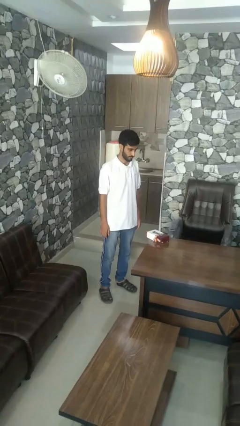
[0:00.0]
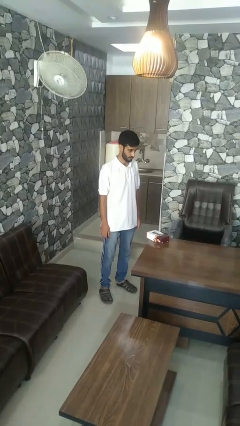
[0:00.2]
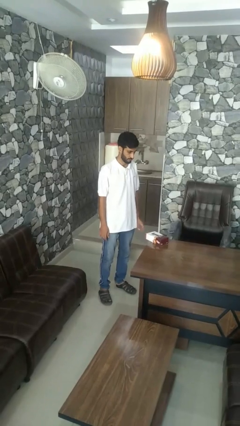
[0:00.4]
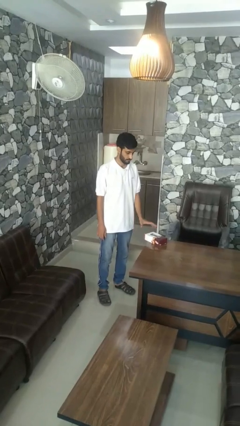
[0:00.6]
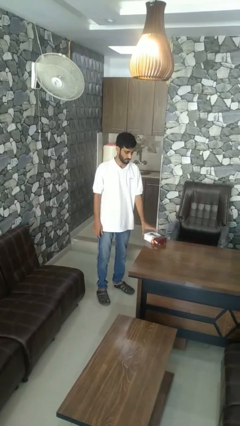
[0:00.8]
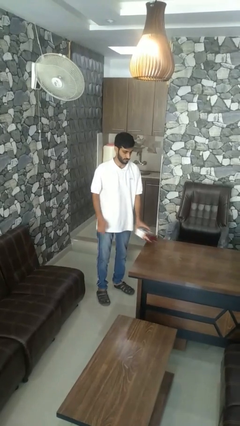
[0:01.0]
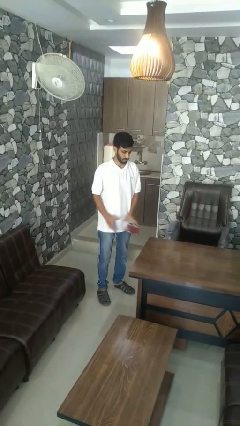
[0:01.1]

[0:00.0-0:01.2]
person picks up object from table

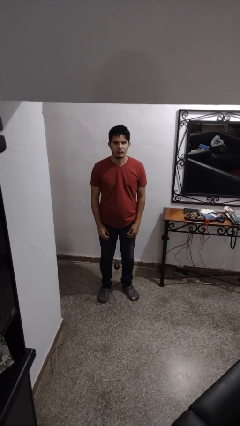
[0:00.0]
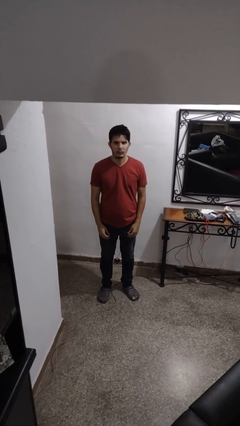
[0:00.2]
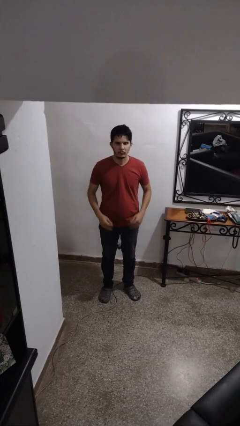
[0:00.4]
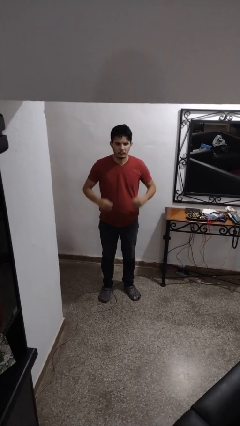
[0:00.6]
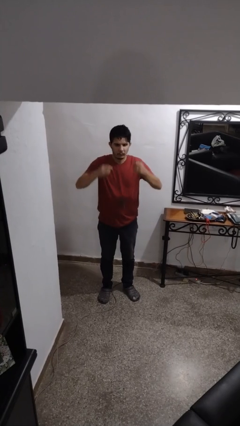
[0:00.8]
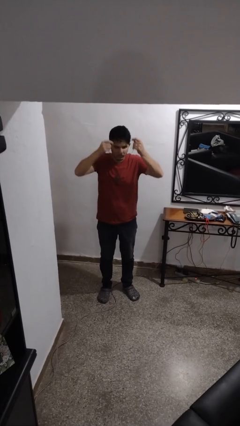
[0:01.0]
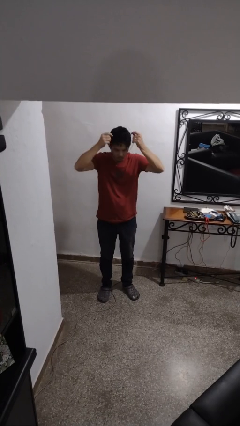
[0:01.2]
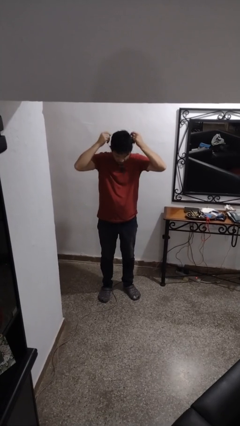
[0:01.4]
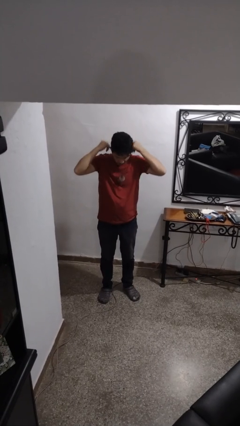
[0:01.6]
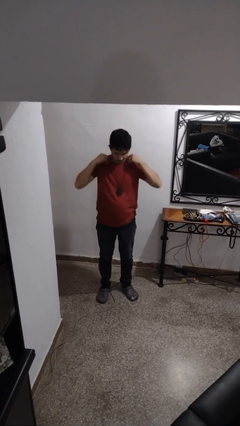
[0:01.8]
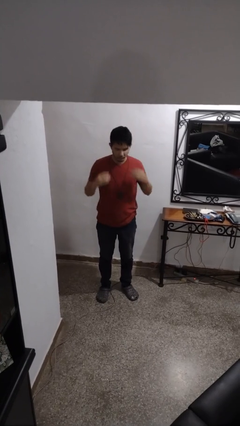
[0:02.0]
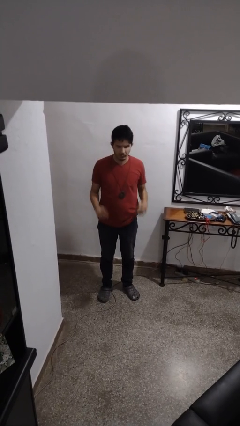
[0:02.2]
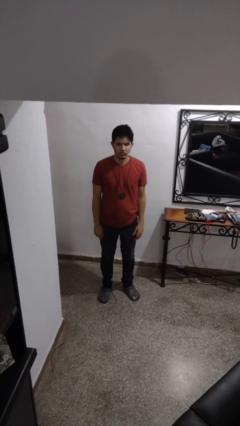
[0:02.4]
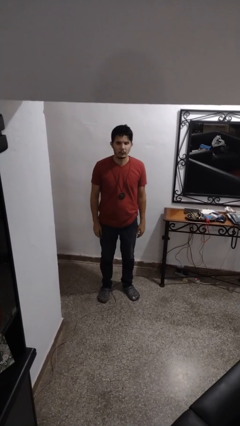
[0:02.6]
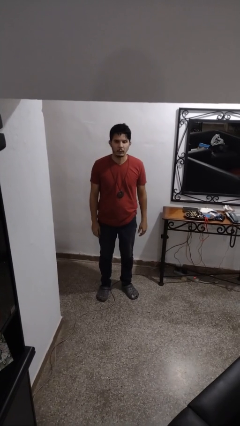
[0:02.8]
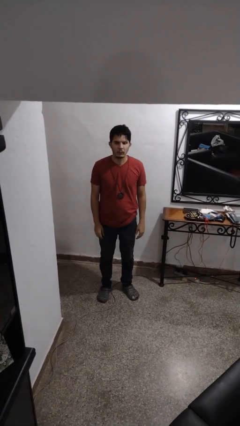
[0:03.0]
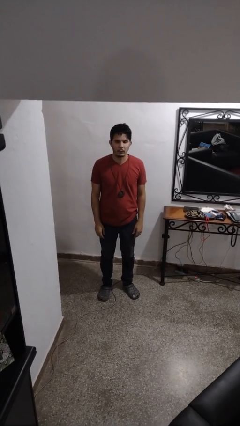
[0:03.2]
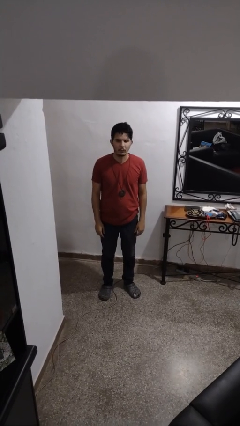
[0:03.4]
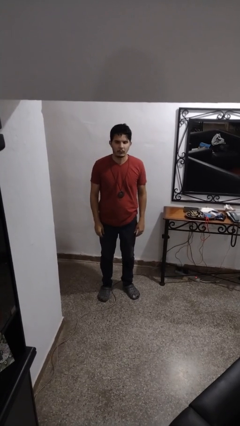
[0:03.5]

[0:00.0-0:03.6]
person puts on necklace

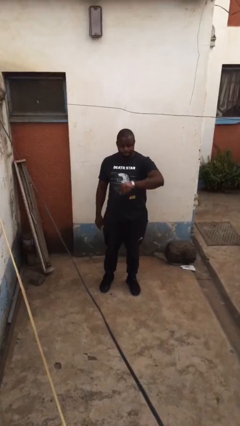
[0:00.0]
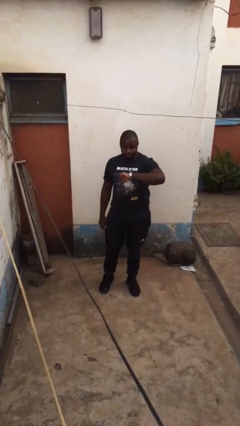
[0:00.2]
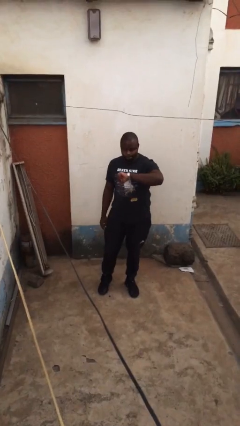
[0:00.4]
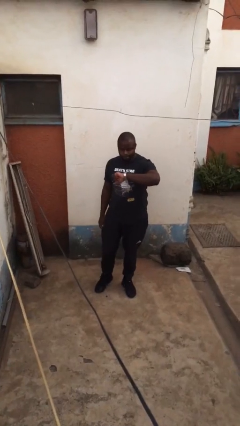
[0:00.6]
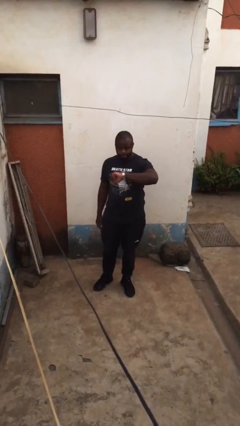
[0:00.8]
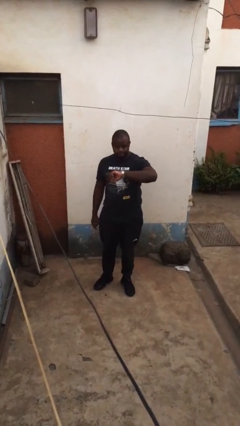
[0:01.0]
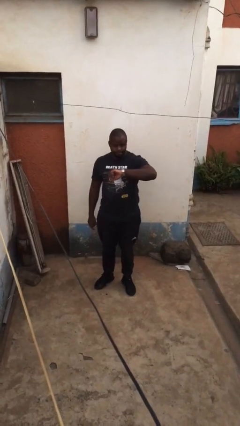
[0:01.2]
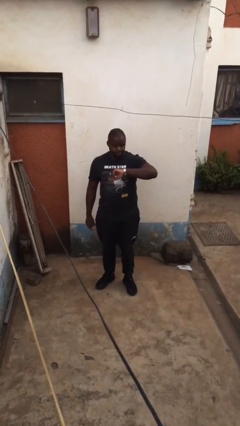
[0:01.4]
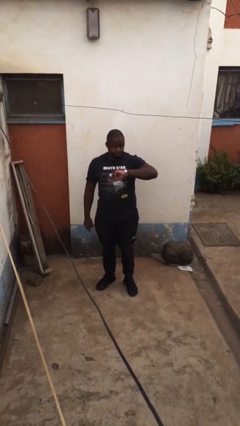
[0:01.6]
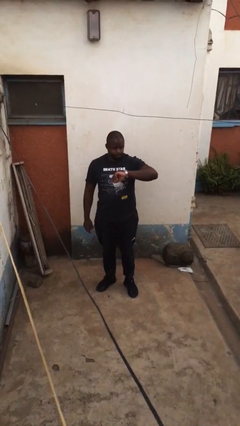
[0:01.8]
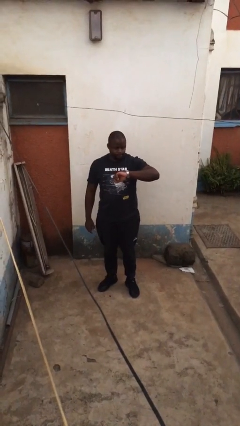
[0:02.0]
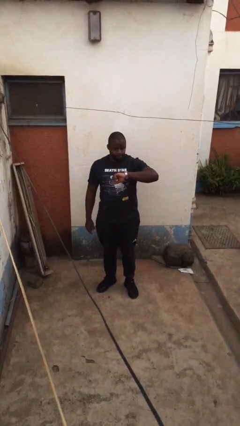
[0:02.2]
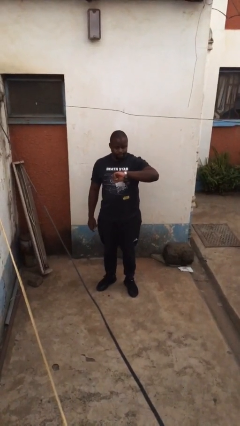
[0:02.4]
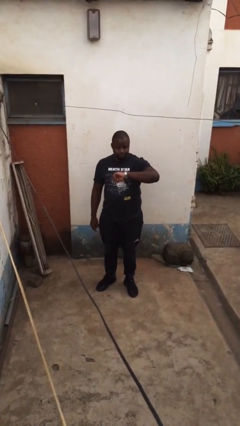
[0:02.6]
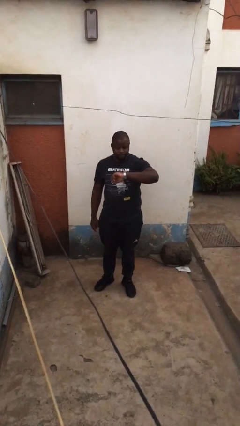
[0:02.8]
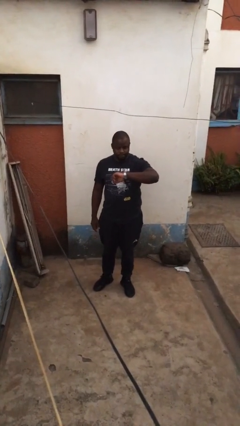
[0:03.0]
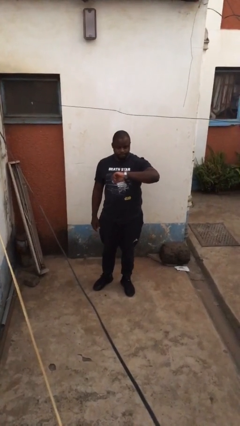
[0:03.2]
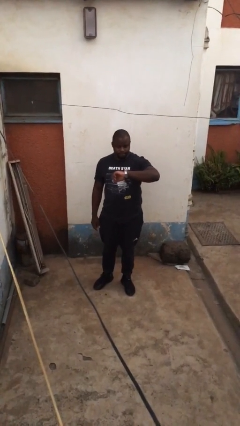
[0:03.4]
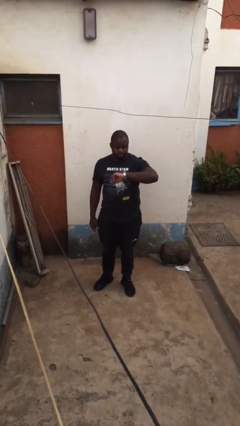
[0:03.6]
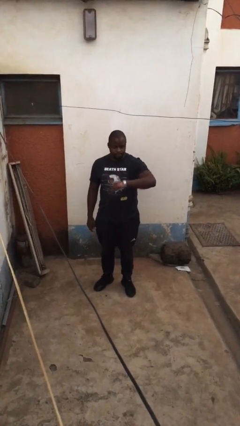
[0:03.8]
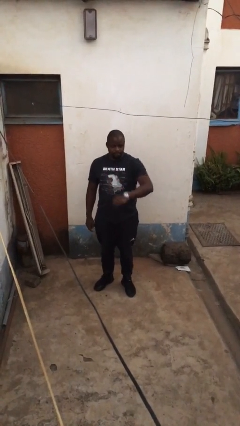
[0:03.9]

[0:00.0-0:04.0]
person looks at wristwatch

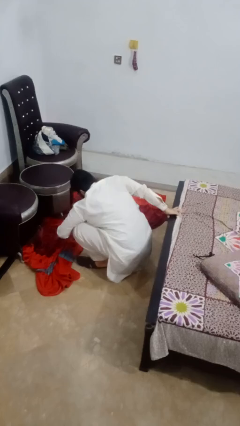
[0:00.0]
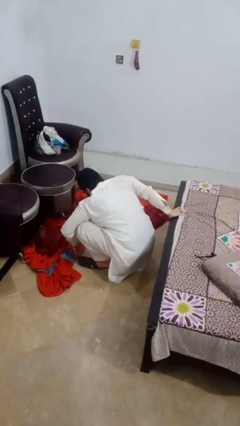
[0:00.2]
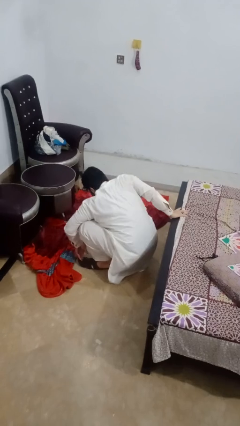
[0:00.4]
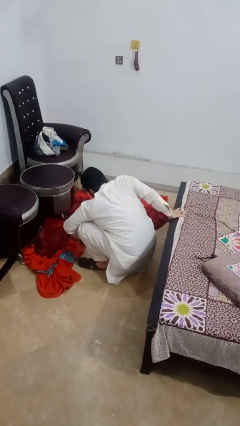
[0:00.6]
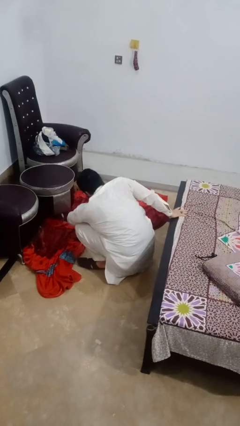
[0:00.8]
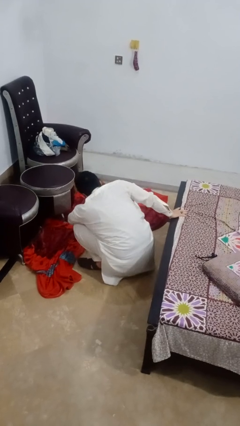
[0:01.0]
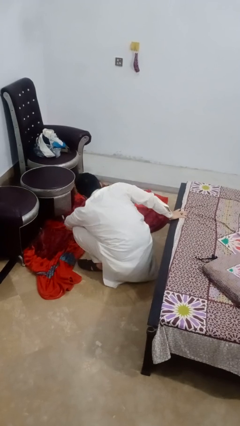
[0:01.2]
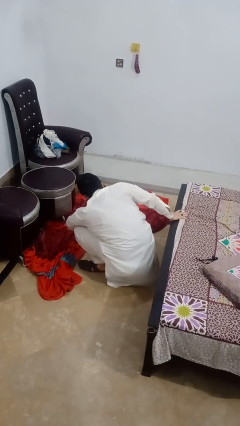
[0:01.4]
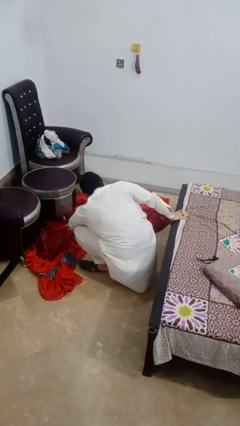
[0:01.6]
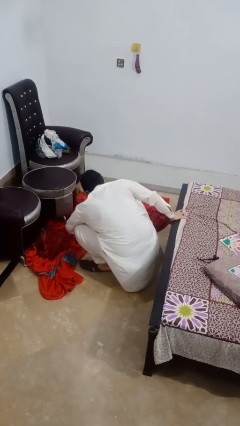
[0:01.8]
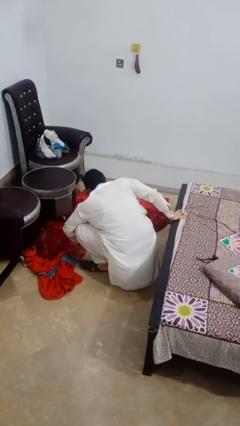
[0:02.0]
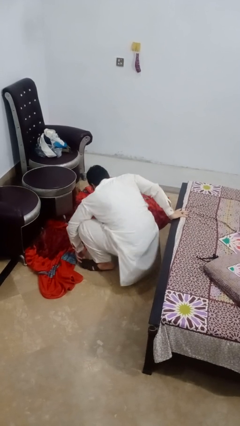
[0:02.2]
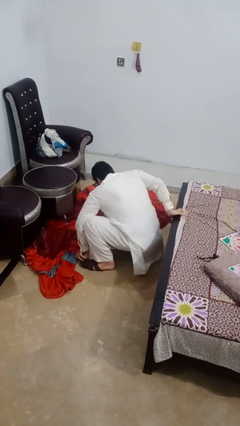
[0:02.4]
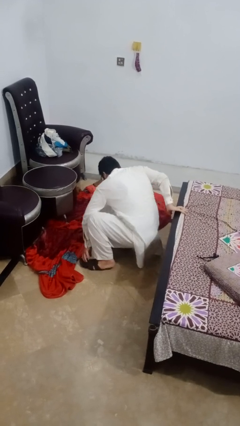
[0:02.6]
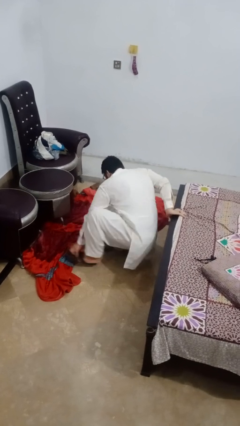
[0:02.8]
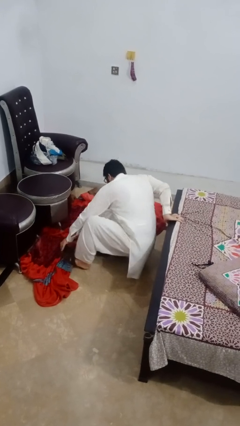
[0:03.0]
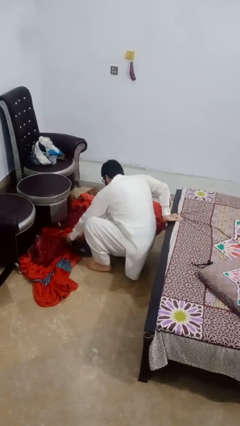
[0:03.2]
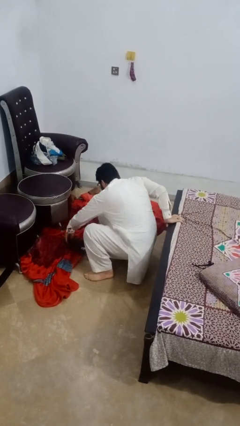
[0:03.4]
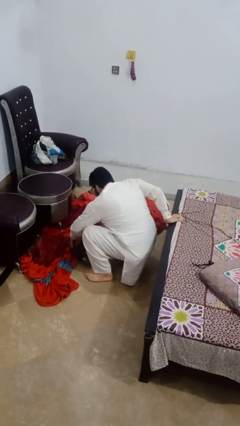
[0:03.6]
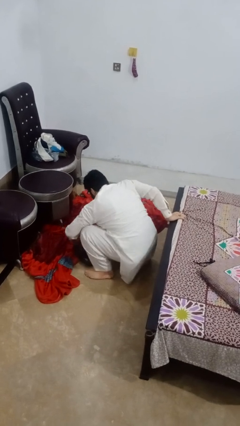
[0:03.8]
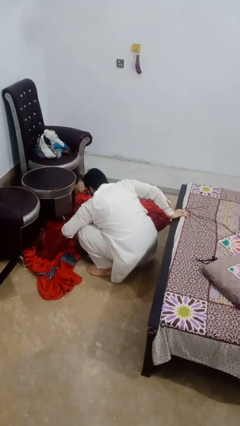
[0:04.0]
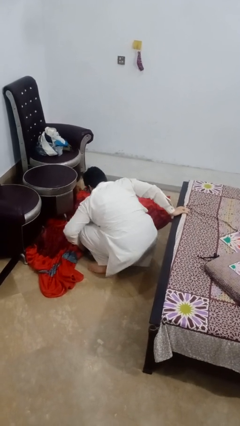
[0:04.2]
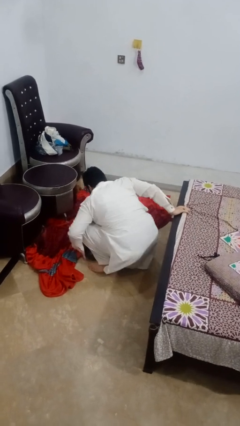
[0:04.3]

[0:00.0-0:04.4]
person takes off shoes

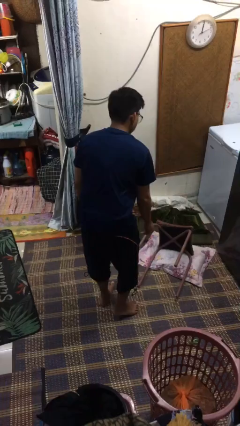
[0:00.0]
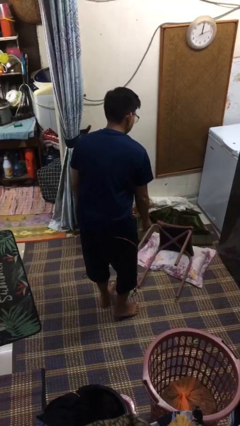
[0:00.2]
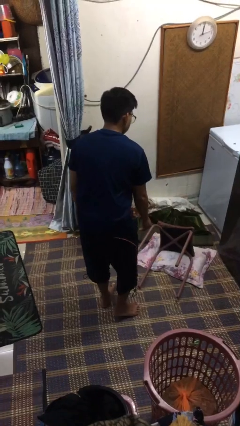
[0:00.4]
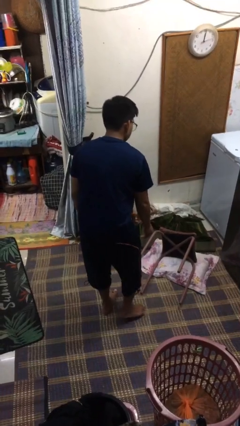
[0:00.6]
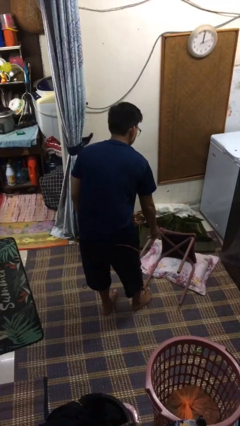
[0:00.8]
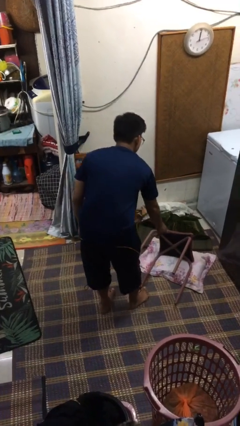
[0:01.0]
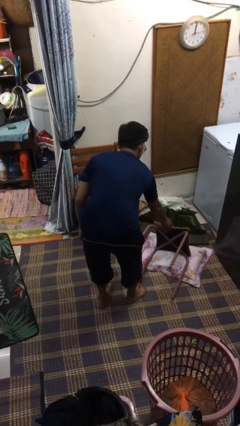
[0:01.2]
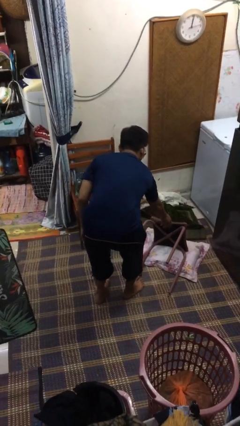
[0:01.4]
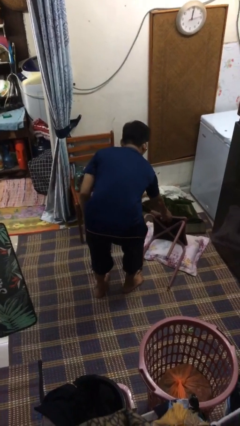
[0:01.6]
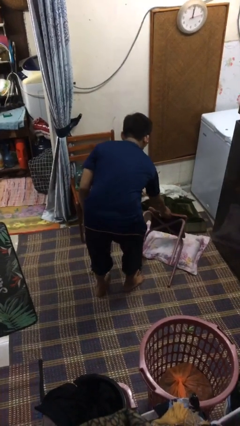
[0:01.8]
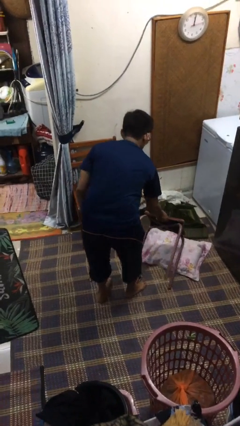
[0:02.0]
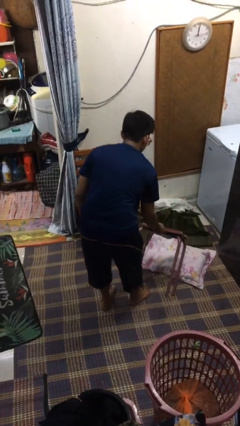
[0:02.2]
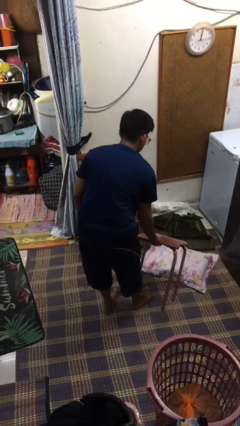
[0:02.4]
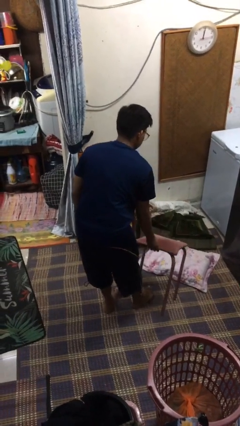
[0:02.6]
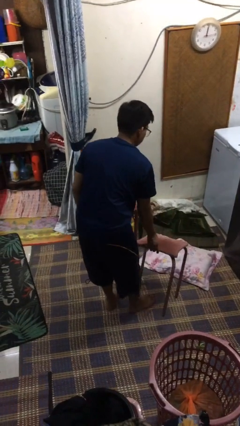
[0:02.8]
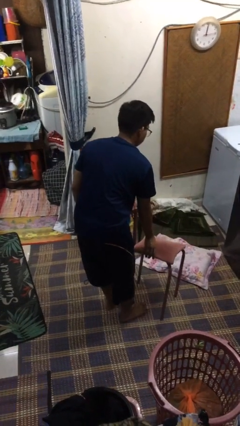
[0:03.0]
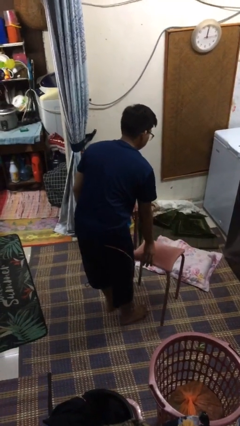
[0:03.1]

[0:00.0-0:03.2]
person sets upright furniture

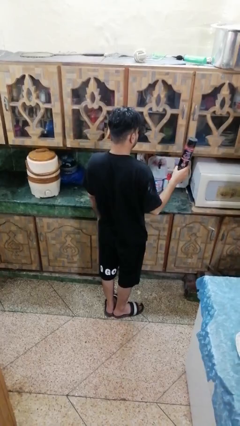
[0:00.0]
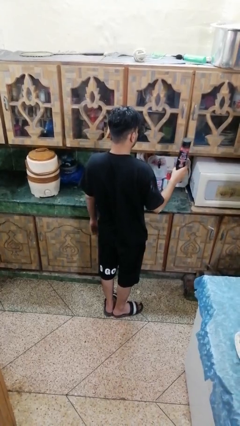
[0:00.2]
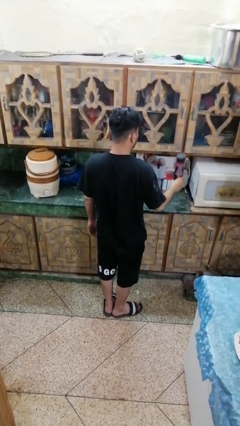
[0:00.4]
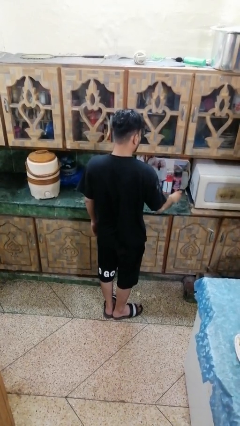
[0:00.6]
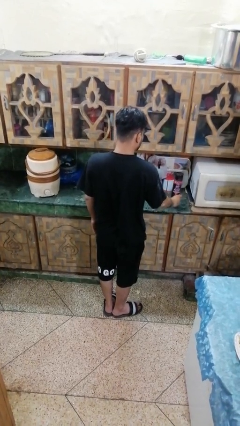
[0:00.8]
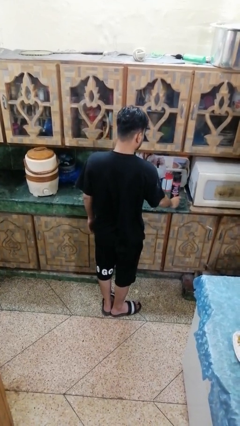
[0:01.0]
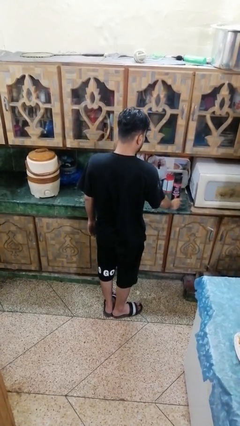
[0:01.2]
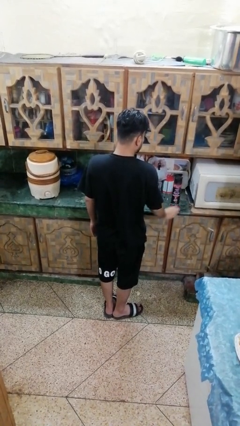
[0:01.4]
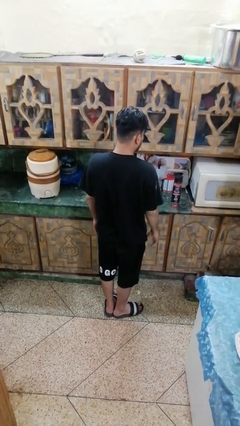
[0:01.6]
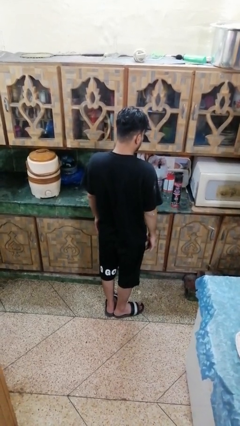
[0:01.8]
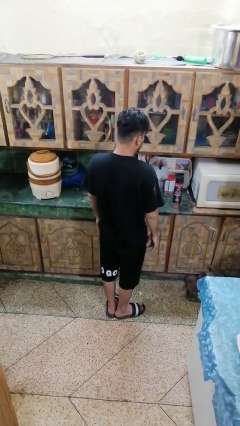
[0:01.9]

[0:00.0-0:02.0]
person puts down object on countertop
